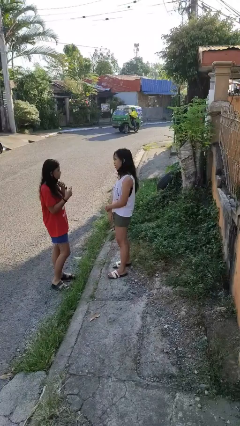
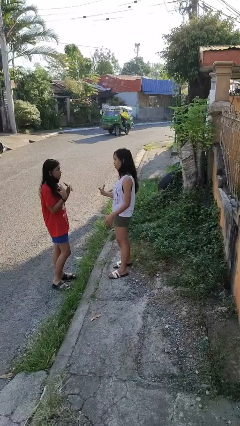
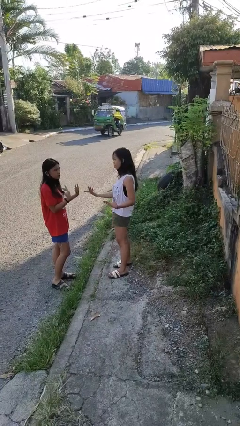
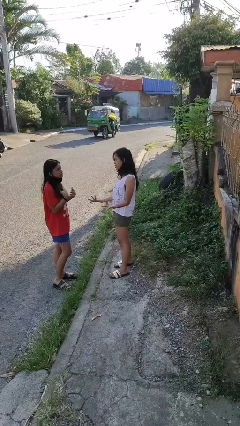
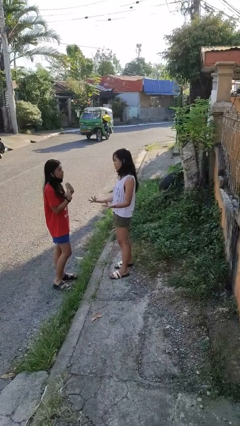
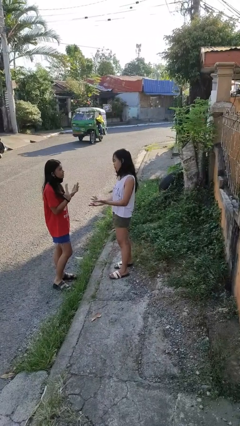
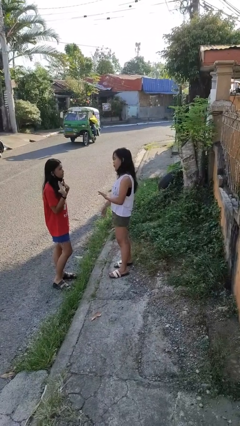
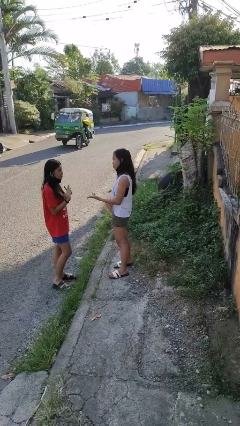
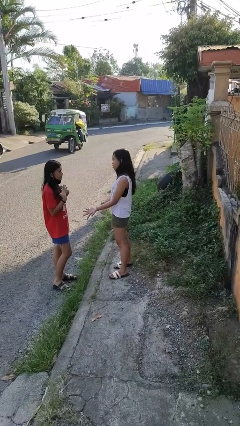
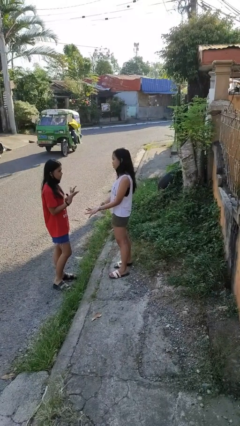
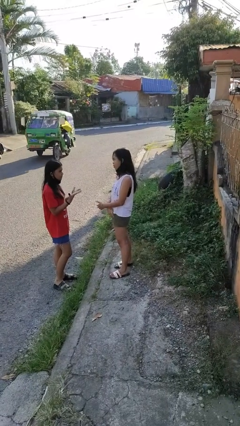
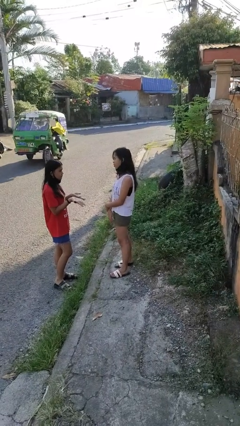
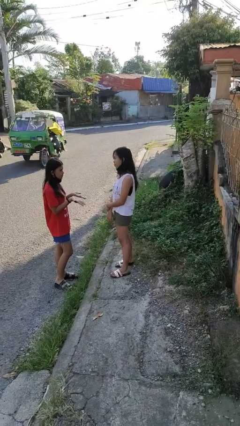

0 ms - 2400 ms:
person talks to person

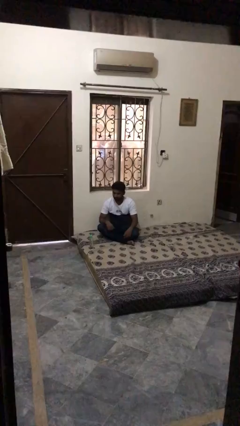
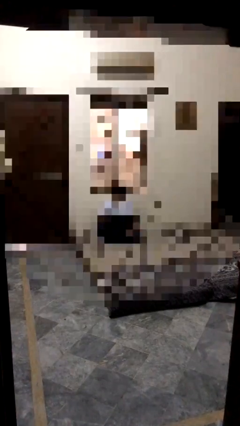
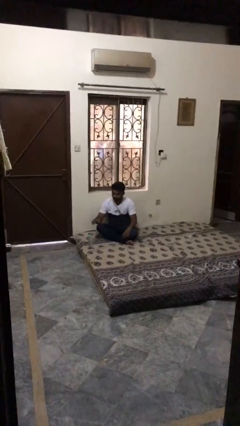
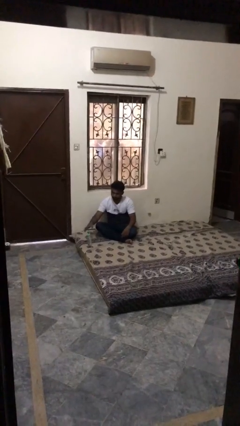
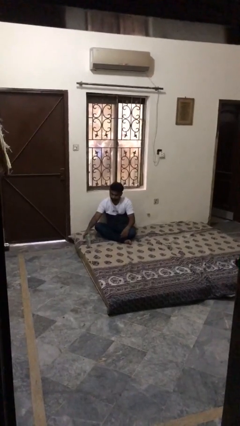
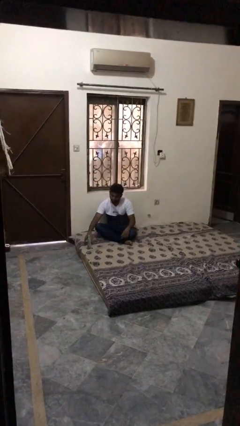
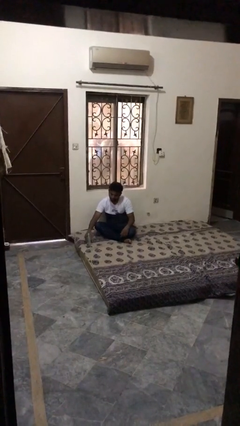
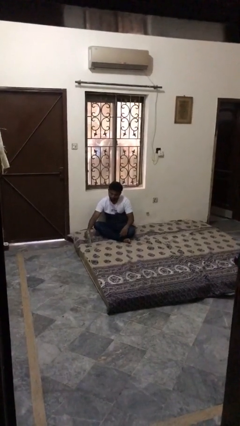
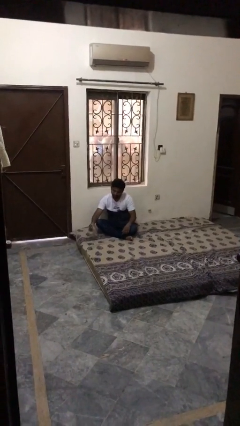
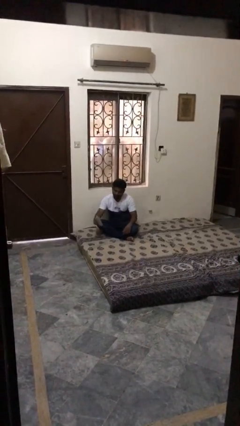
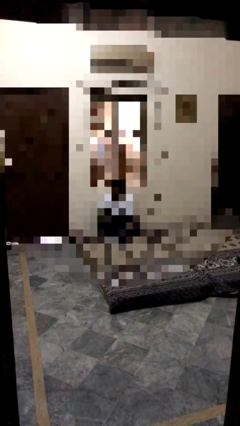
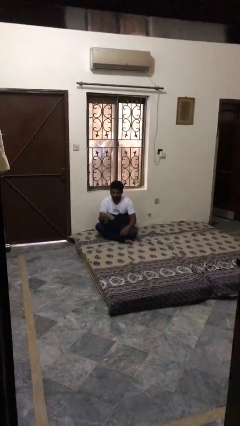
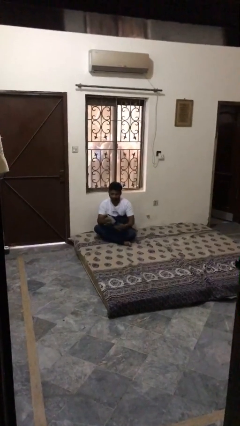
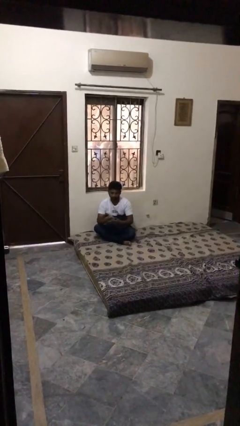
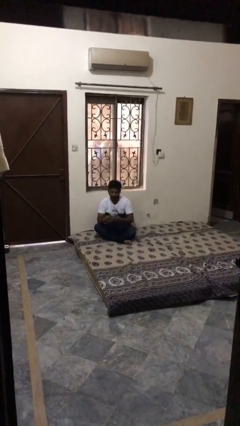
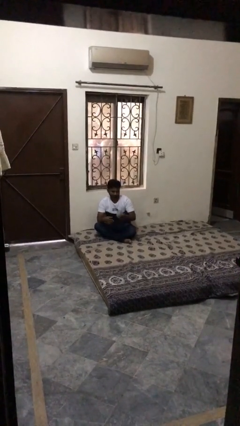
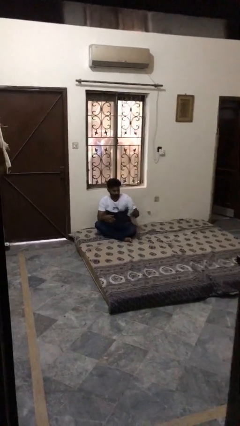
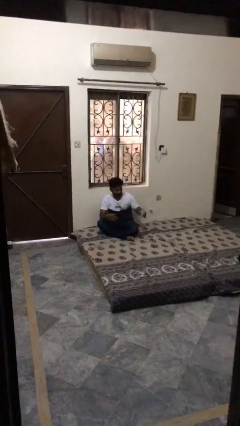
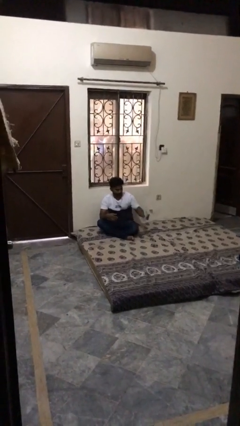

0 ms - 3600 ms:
person picks up object from floor

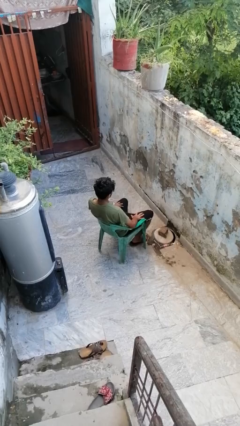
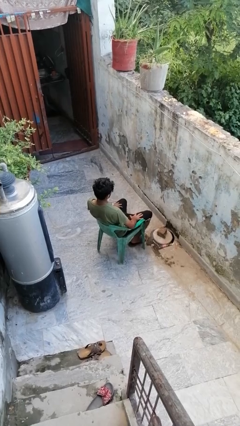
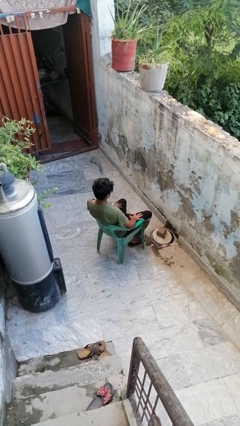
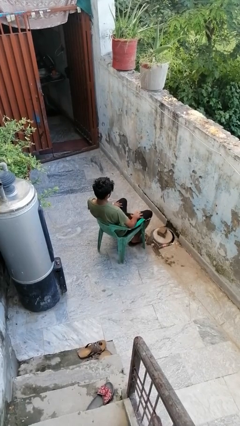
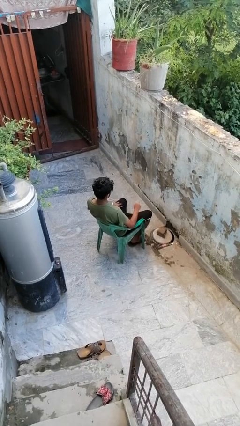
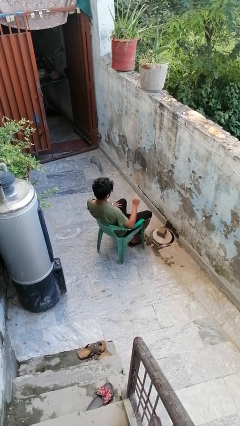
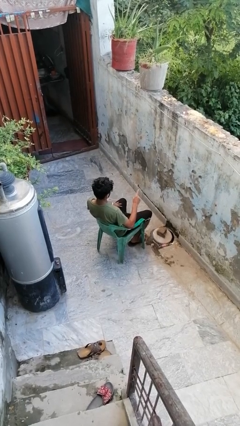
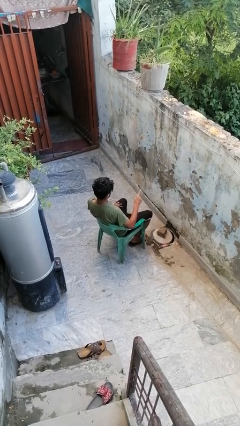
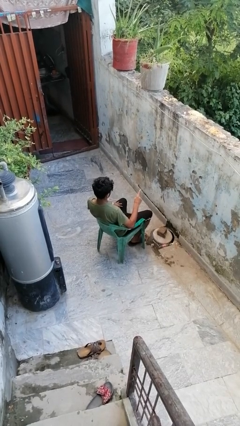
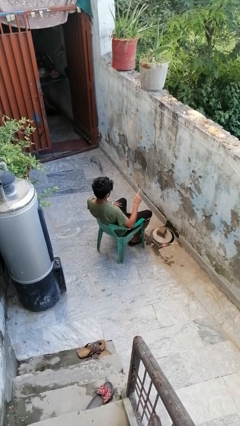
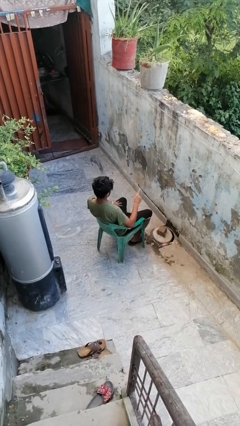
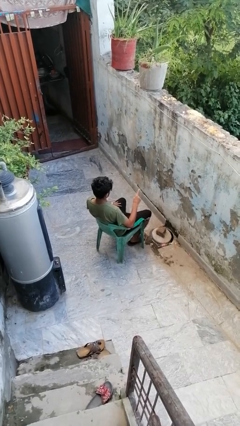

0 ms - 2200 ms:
person gestures number one

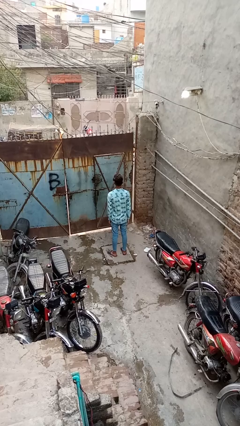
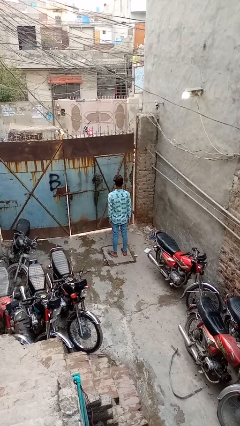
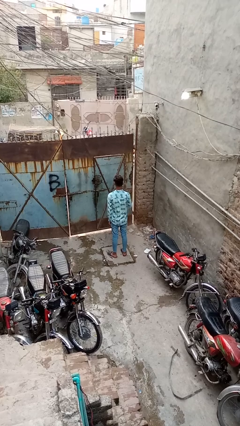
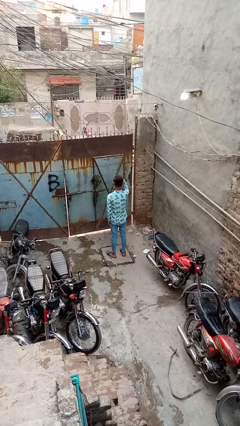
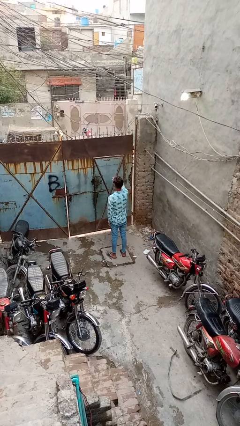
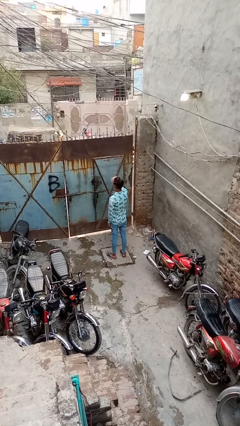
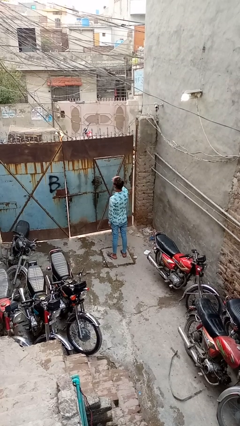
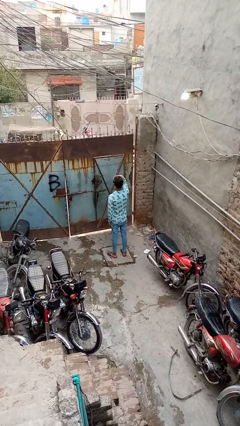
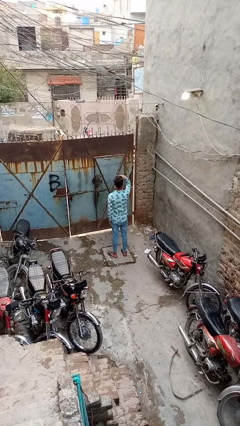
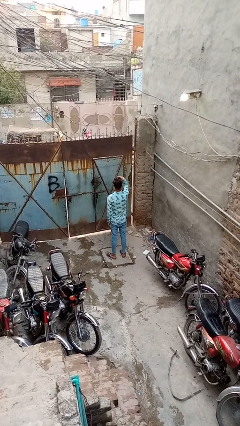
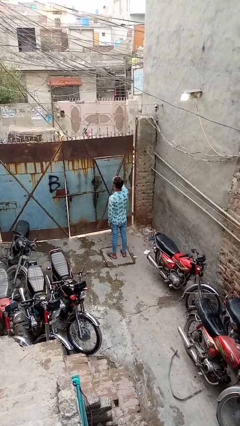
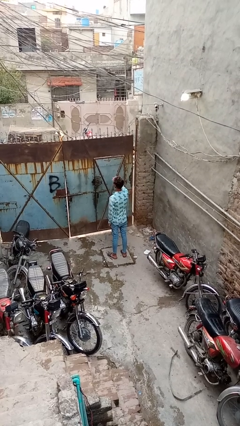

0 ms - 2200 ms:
person shades eyes

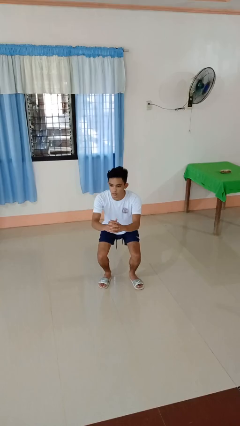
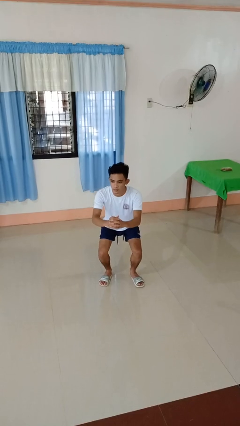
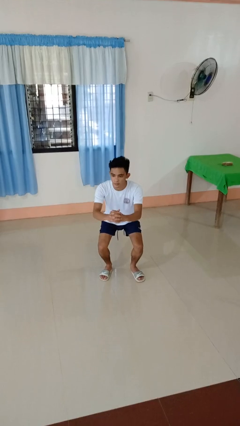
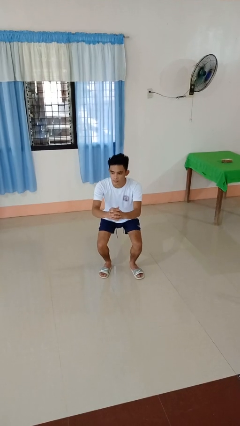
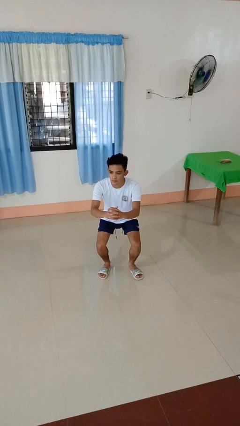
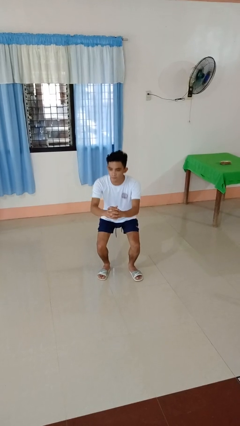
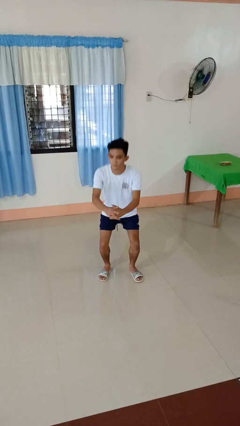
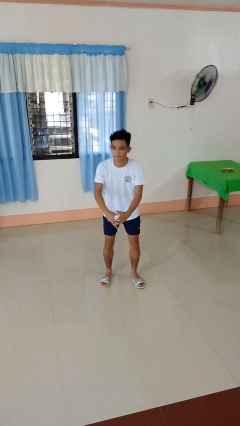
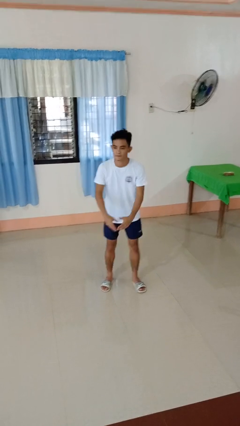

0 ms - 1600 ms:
person squats

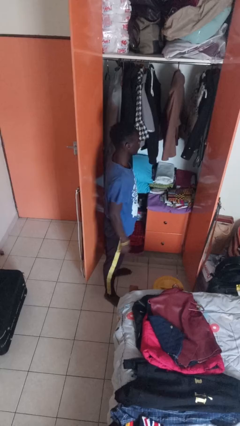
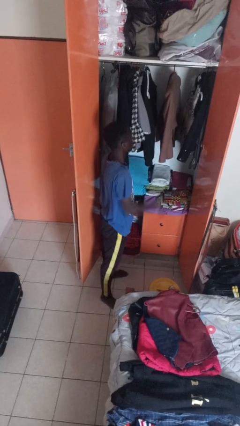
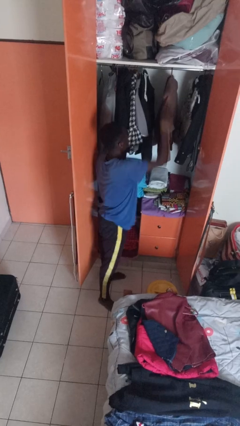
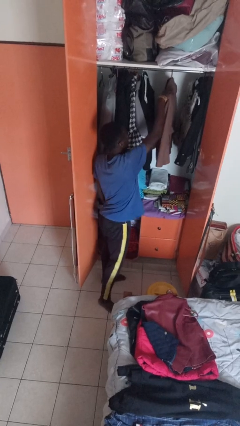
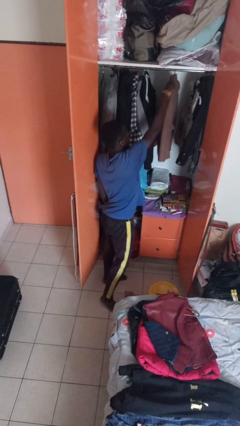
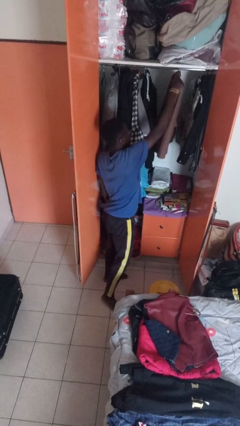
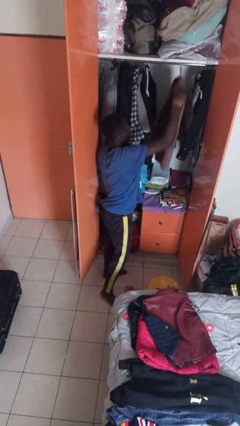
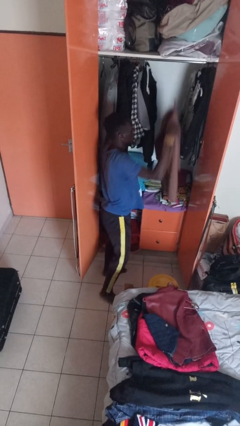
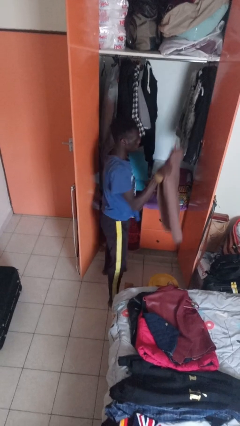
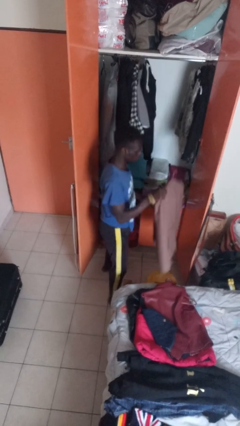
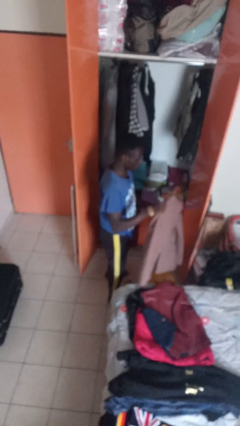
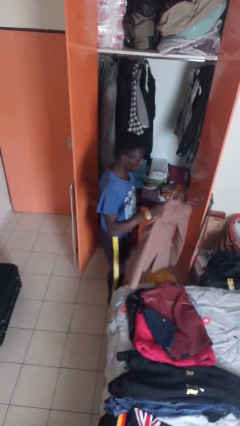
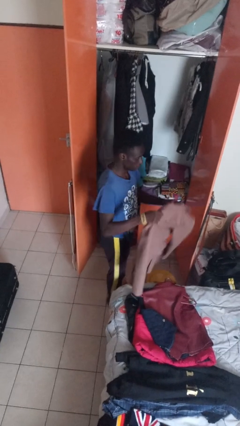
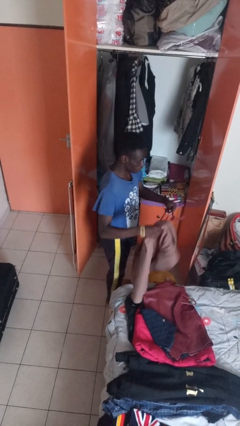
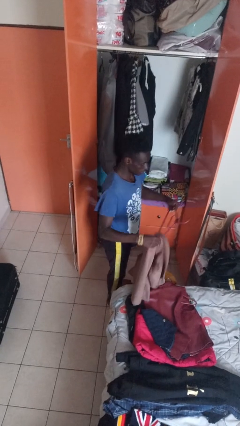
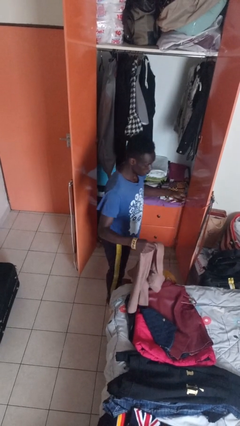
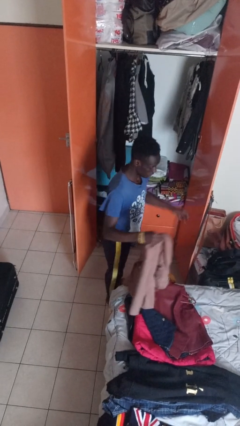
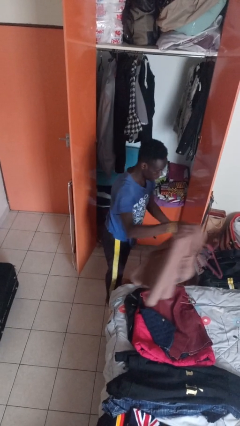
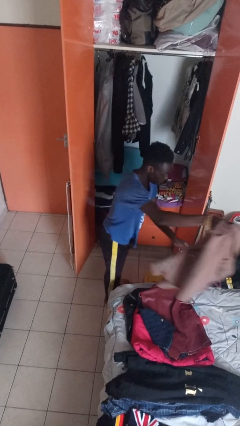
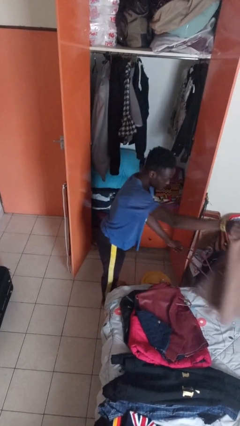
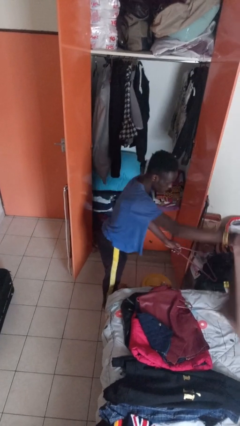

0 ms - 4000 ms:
person takes clothes from closet

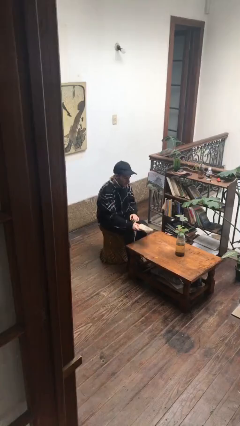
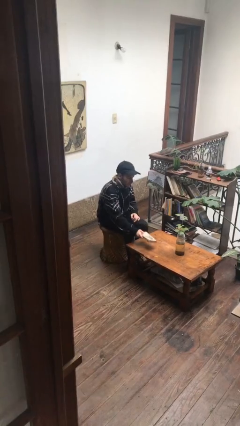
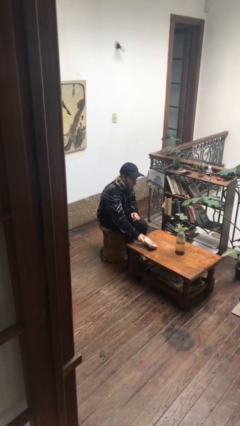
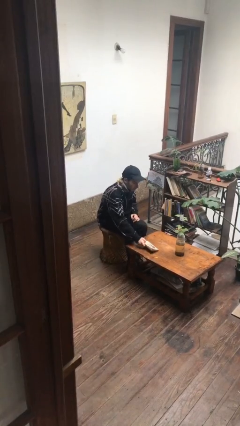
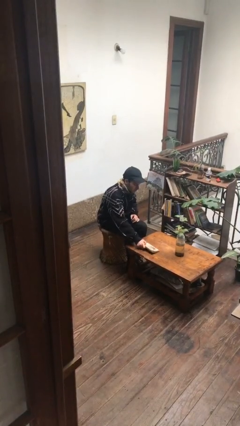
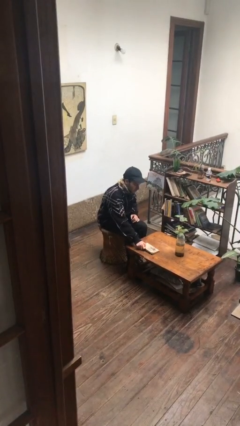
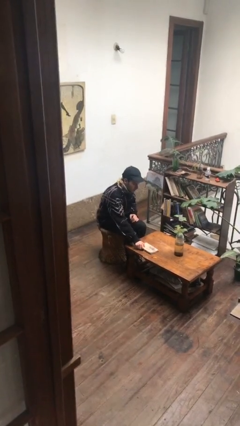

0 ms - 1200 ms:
person puts down object on table
